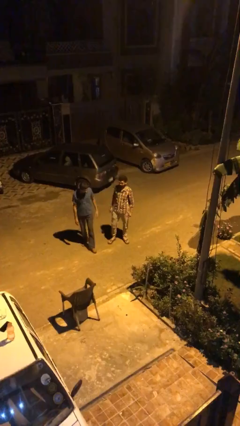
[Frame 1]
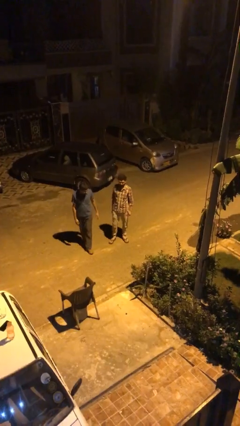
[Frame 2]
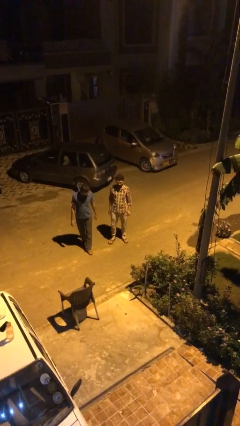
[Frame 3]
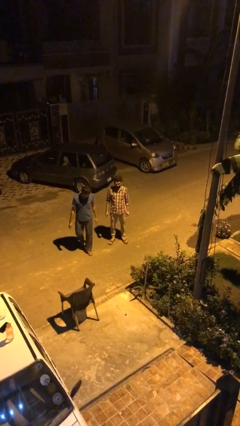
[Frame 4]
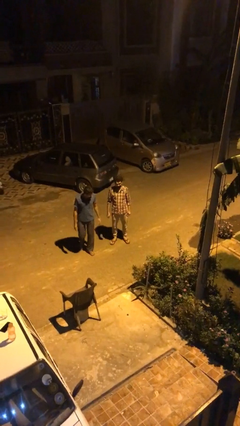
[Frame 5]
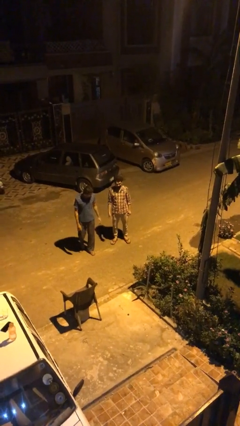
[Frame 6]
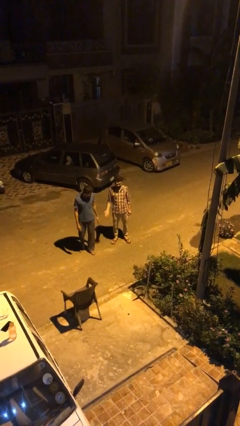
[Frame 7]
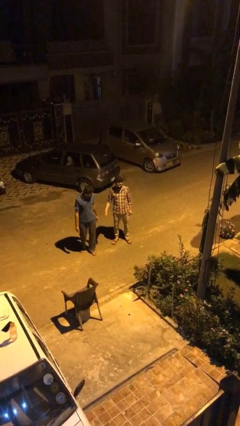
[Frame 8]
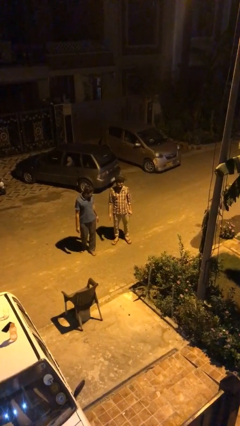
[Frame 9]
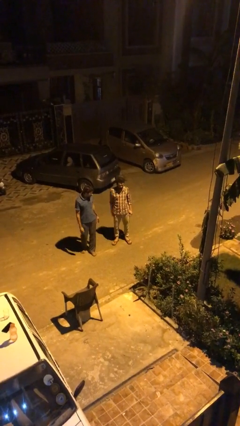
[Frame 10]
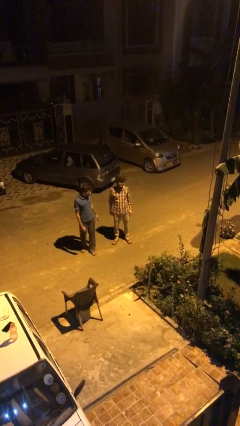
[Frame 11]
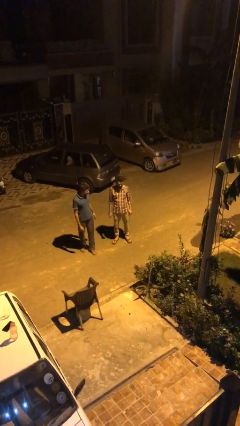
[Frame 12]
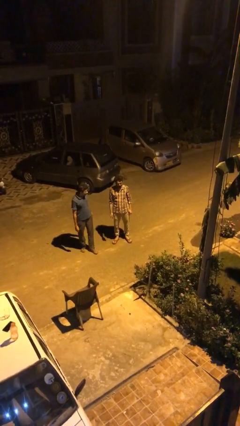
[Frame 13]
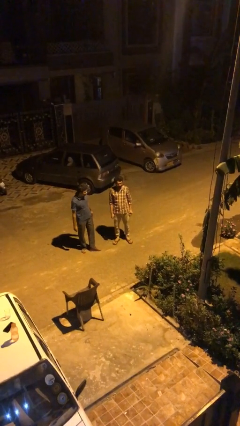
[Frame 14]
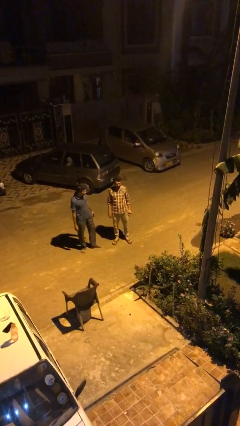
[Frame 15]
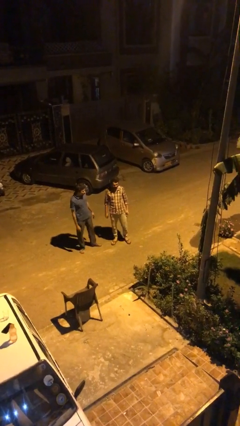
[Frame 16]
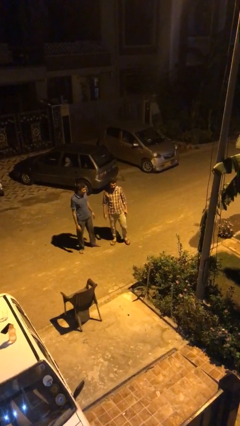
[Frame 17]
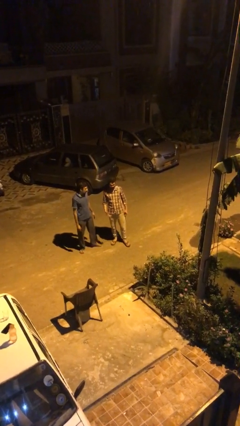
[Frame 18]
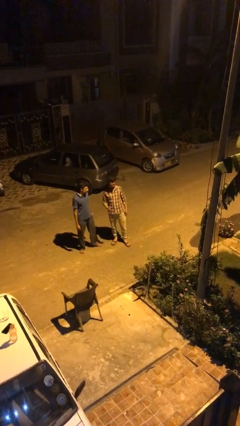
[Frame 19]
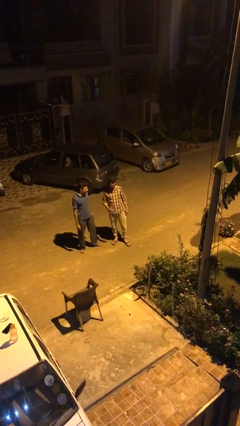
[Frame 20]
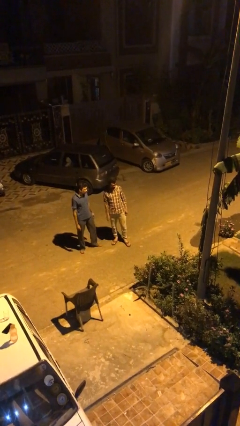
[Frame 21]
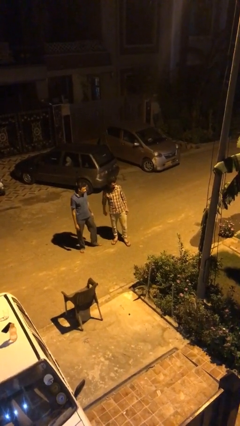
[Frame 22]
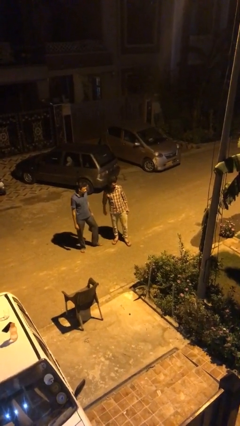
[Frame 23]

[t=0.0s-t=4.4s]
person talks to person

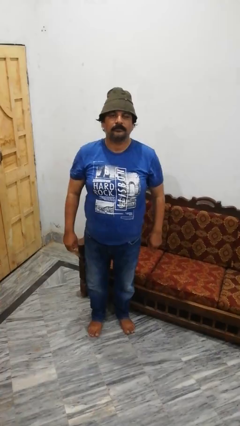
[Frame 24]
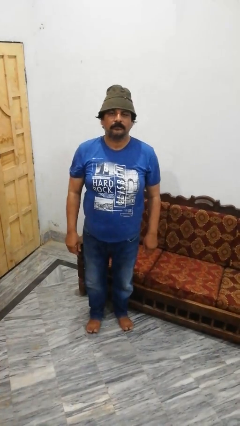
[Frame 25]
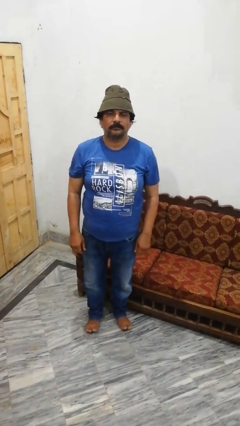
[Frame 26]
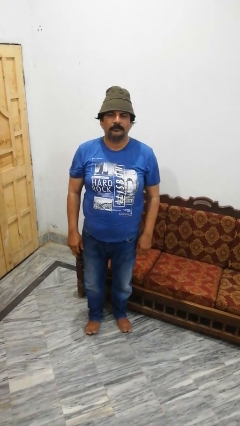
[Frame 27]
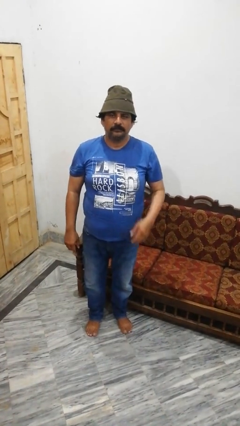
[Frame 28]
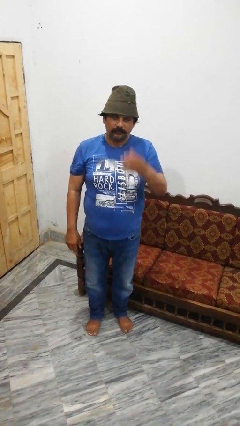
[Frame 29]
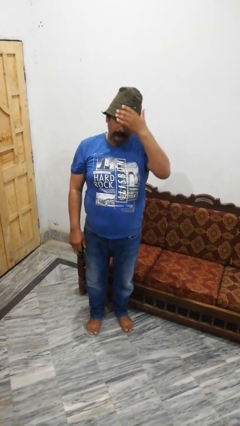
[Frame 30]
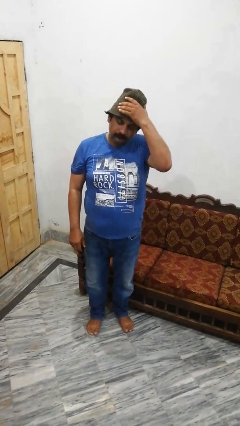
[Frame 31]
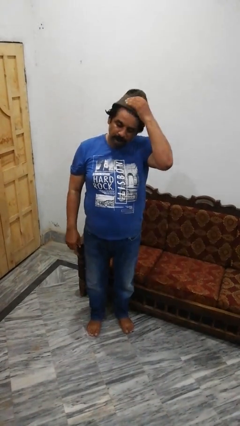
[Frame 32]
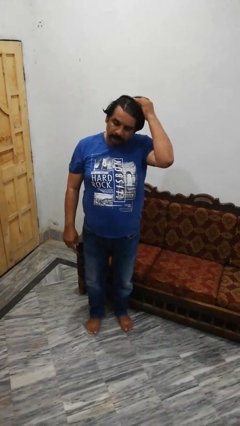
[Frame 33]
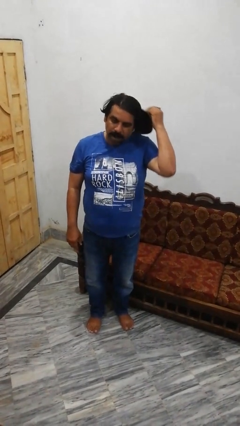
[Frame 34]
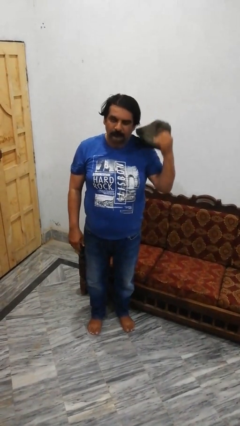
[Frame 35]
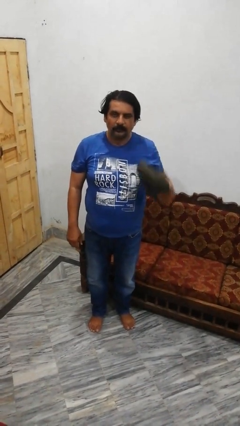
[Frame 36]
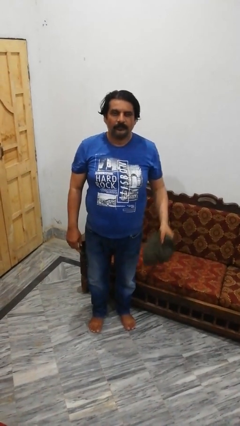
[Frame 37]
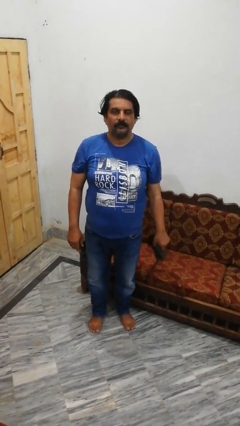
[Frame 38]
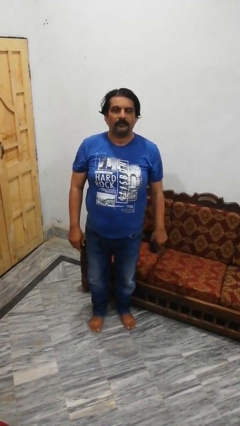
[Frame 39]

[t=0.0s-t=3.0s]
person takes off hat

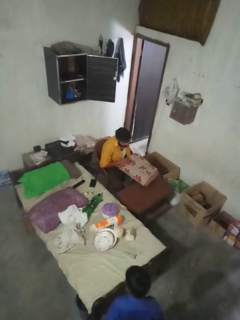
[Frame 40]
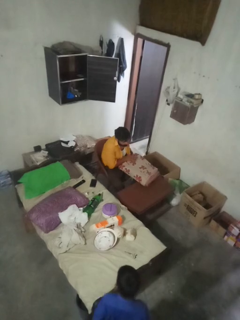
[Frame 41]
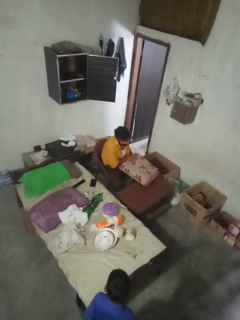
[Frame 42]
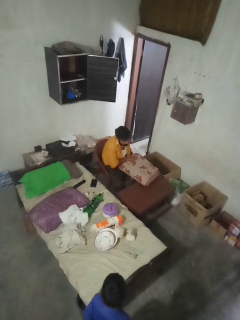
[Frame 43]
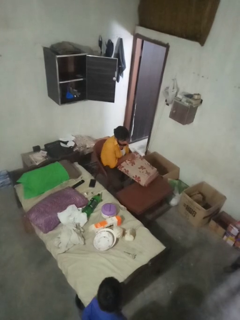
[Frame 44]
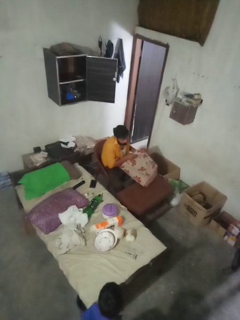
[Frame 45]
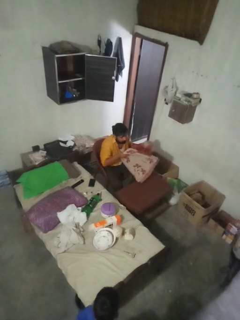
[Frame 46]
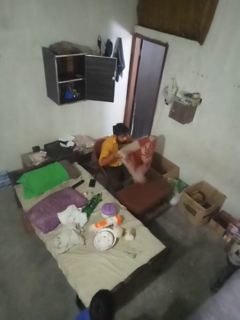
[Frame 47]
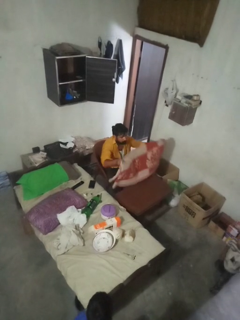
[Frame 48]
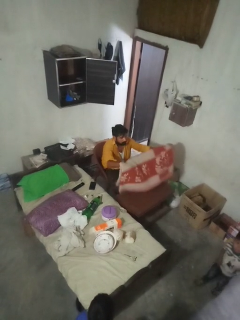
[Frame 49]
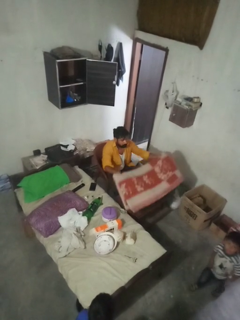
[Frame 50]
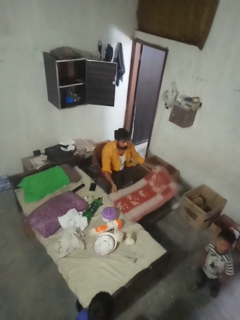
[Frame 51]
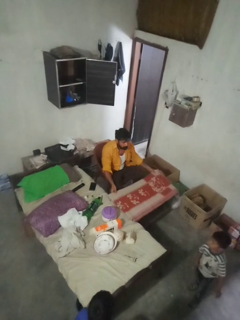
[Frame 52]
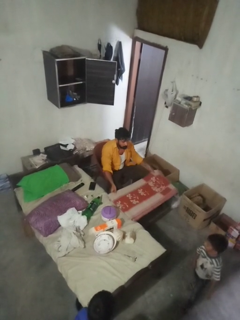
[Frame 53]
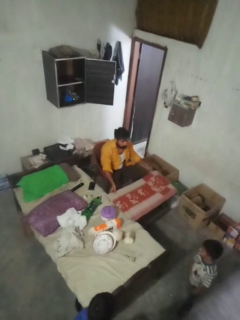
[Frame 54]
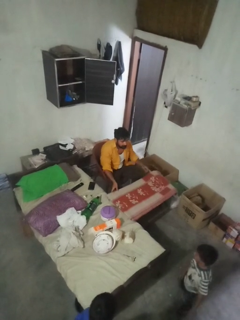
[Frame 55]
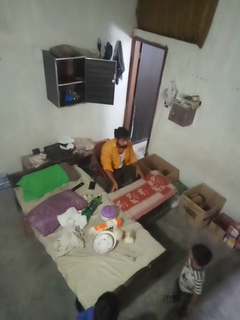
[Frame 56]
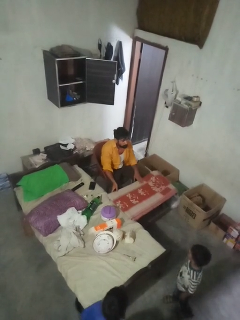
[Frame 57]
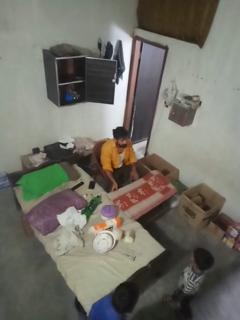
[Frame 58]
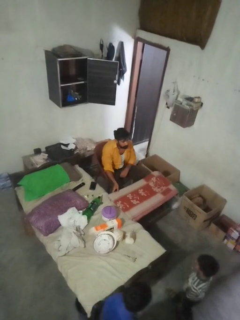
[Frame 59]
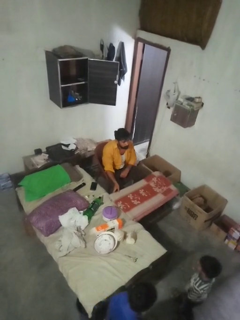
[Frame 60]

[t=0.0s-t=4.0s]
person spreads tablecloth

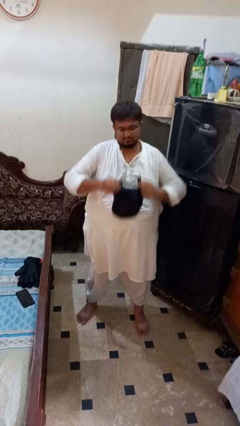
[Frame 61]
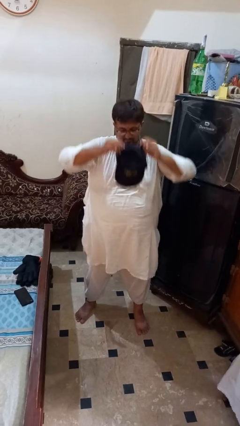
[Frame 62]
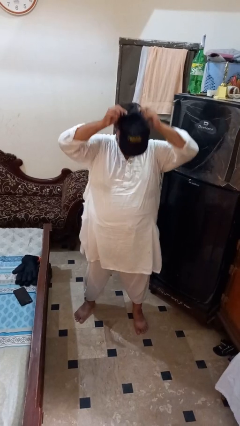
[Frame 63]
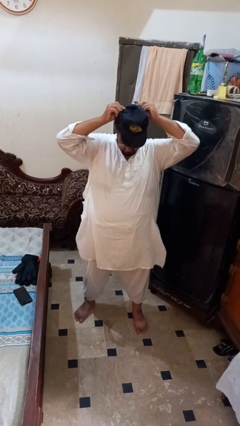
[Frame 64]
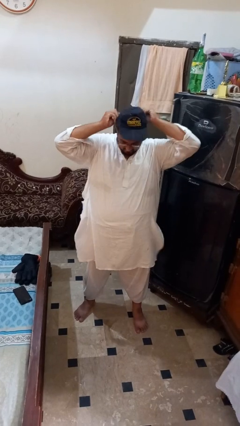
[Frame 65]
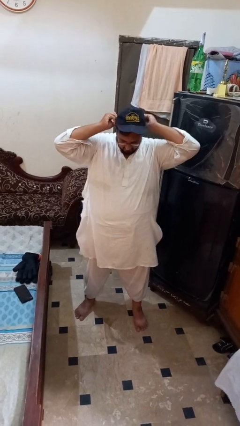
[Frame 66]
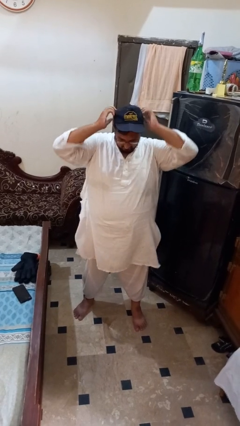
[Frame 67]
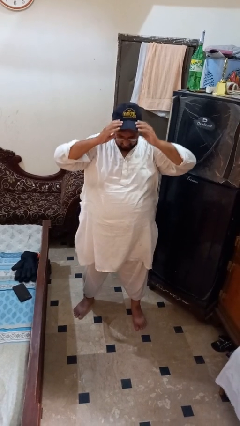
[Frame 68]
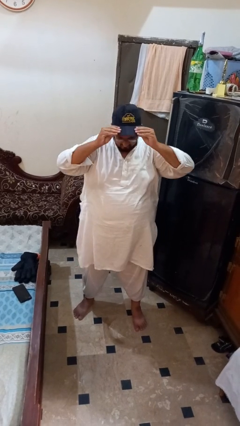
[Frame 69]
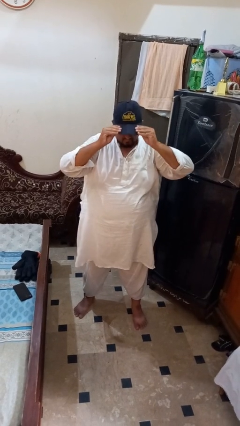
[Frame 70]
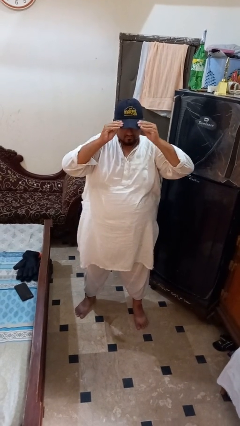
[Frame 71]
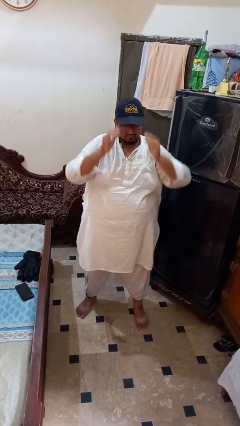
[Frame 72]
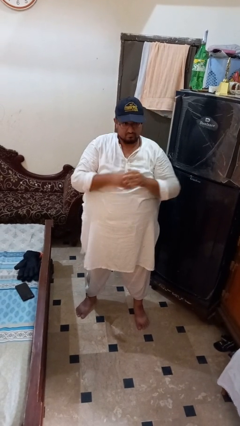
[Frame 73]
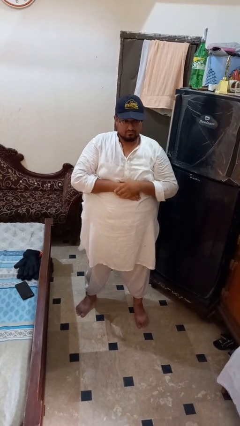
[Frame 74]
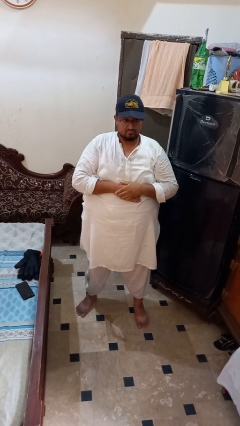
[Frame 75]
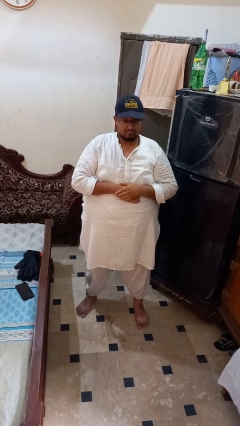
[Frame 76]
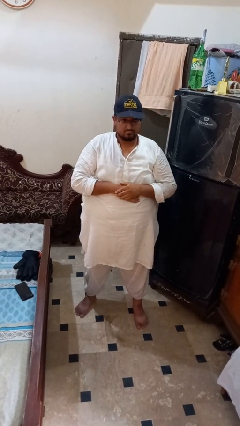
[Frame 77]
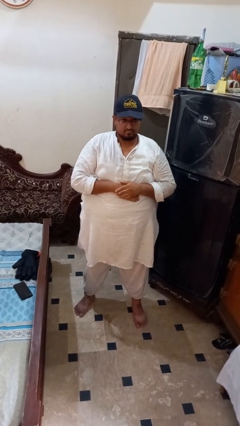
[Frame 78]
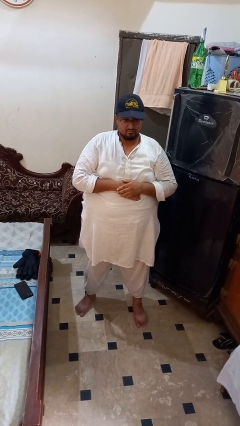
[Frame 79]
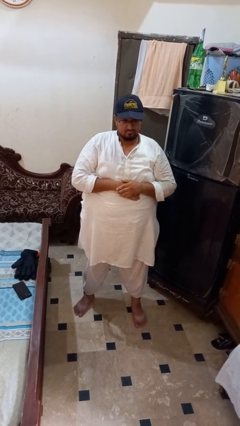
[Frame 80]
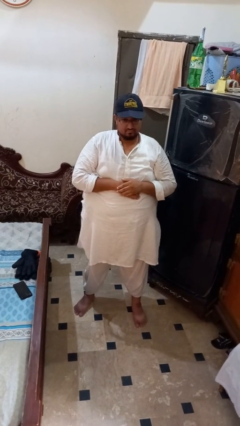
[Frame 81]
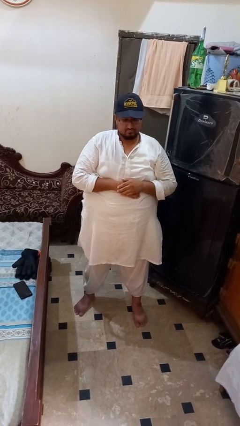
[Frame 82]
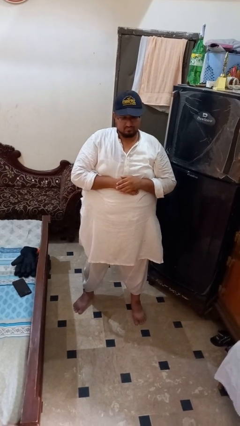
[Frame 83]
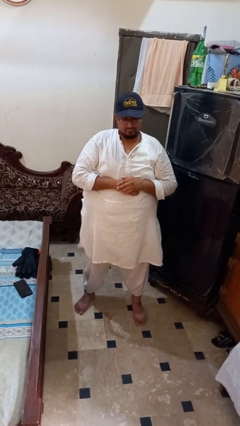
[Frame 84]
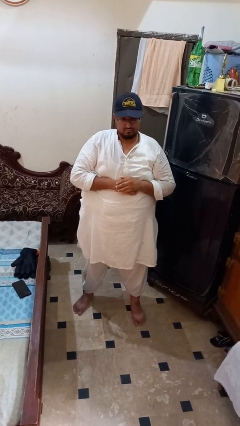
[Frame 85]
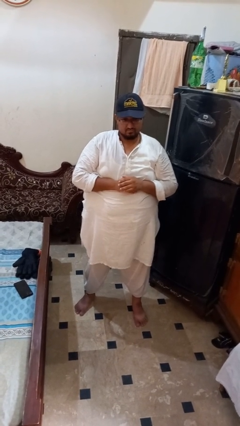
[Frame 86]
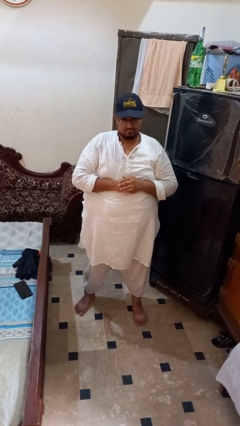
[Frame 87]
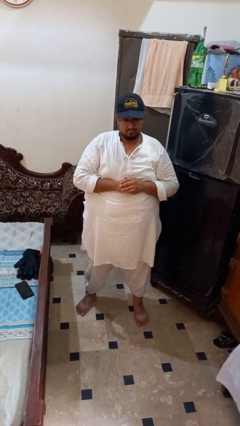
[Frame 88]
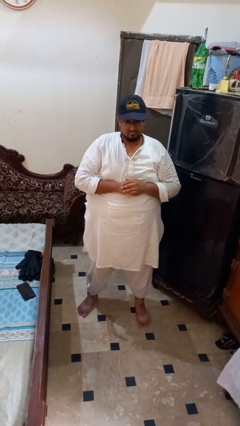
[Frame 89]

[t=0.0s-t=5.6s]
person puts on hat

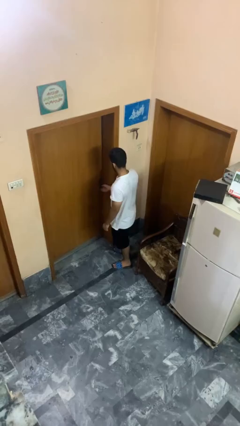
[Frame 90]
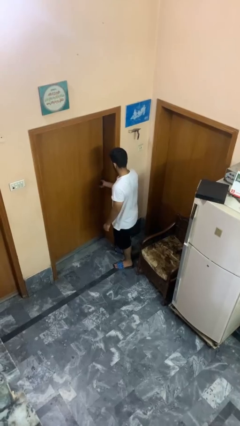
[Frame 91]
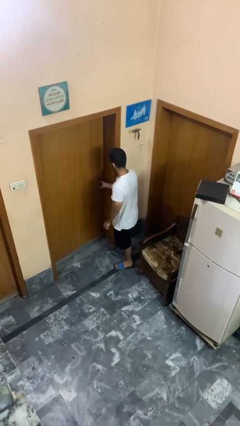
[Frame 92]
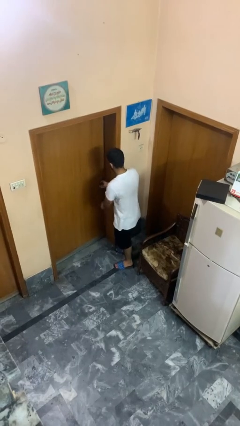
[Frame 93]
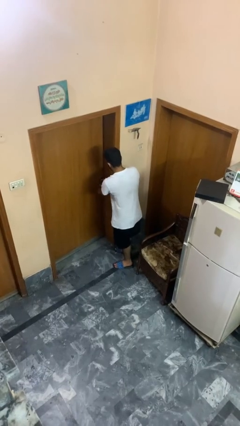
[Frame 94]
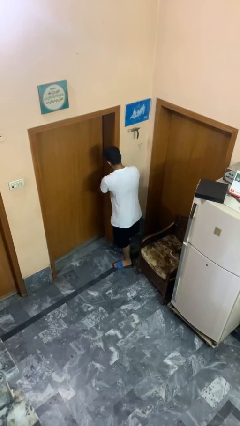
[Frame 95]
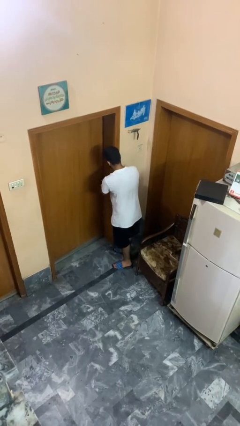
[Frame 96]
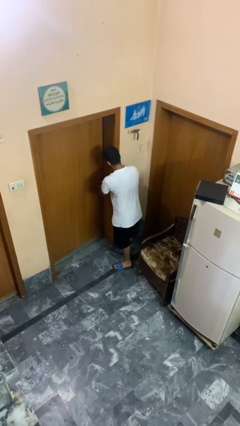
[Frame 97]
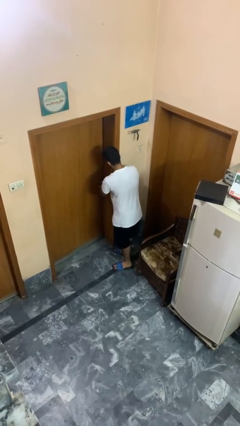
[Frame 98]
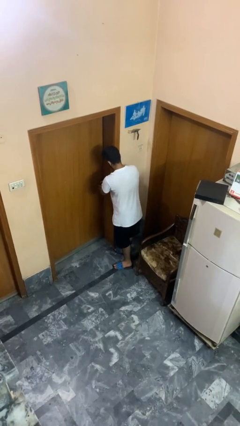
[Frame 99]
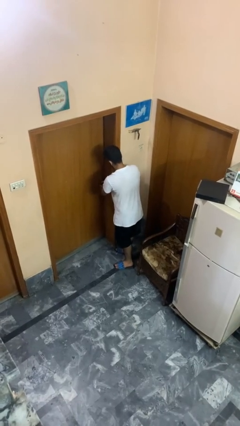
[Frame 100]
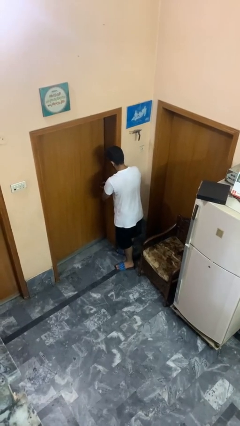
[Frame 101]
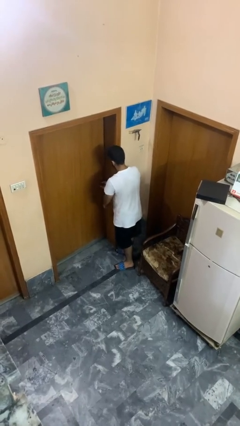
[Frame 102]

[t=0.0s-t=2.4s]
person unlocks door with keys
